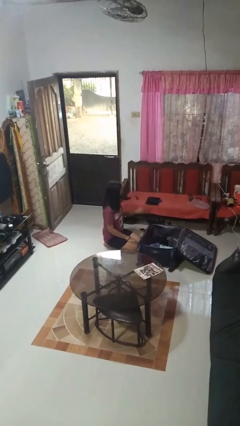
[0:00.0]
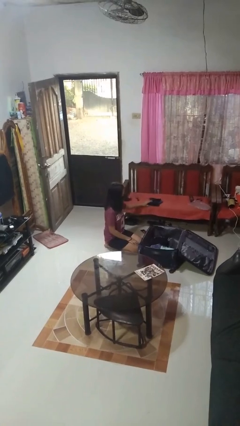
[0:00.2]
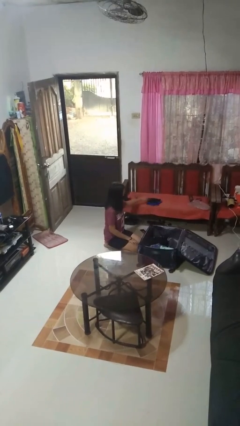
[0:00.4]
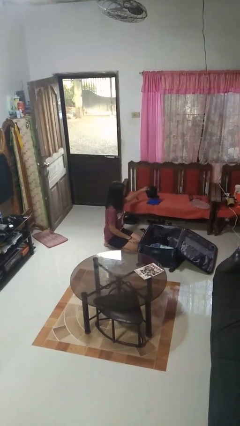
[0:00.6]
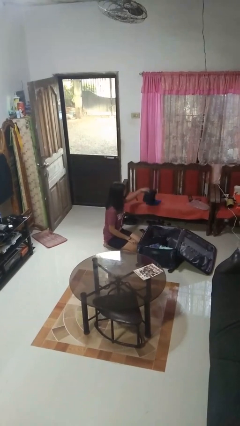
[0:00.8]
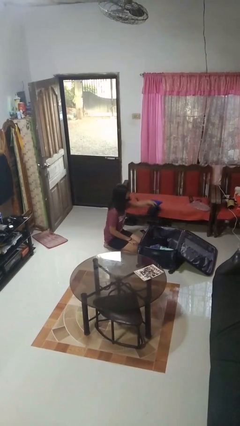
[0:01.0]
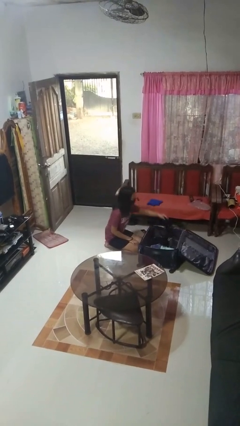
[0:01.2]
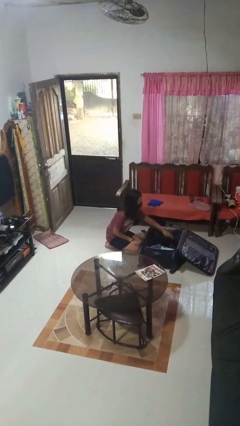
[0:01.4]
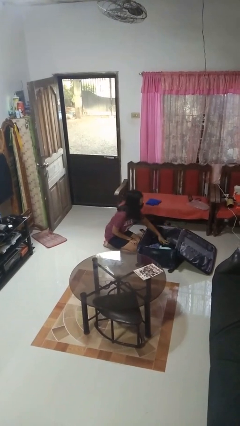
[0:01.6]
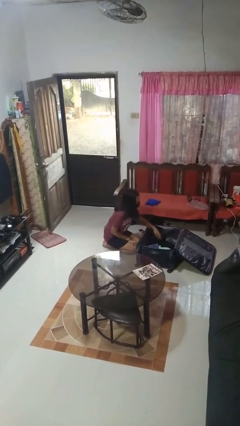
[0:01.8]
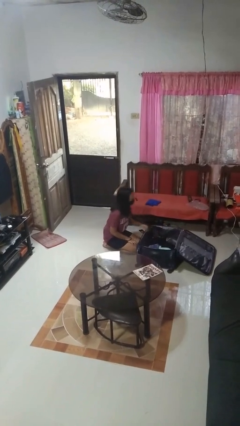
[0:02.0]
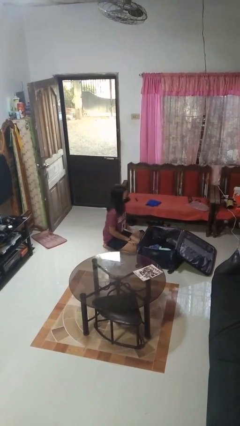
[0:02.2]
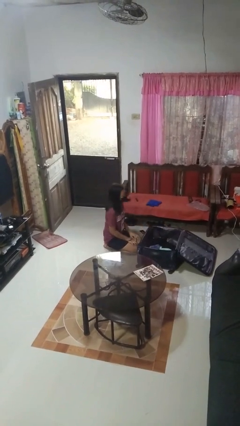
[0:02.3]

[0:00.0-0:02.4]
person loads clothes into suitcase

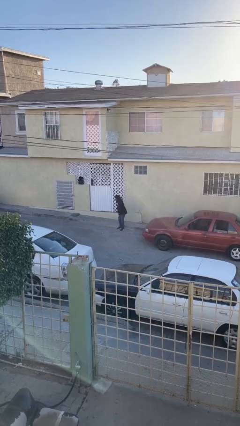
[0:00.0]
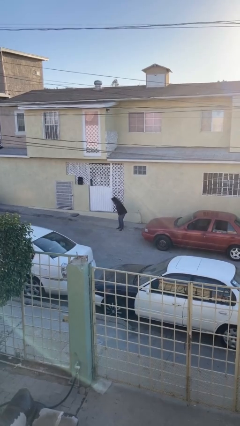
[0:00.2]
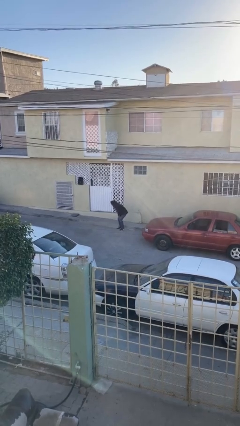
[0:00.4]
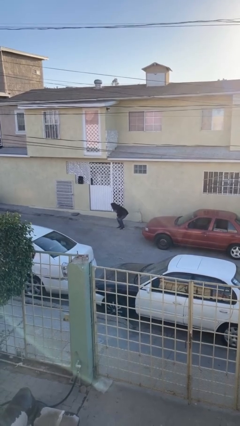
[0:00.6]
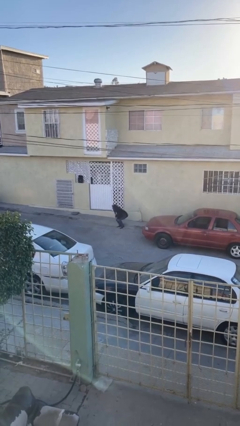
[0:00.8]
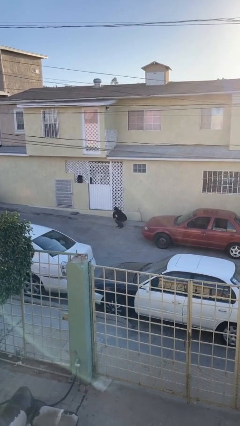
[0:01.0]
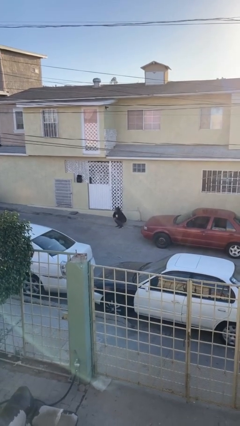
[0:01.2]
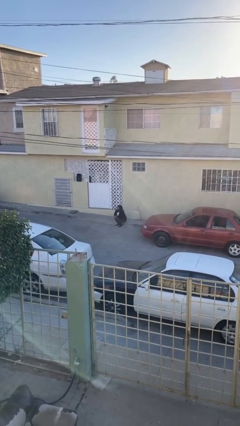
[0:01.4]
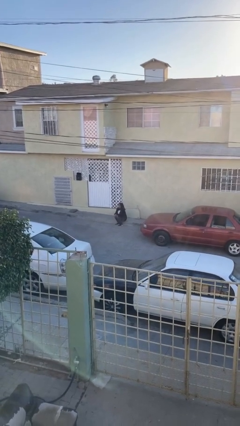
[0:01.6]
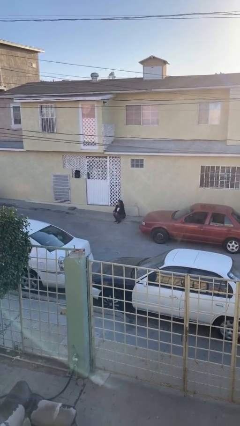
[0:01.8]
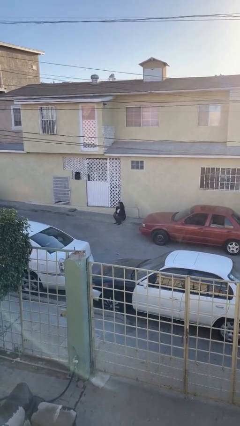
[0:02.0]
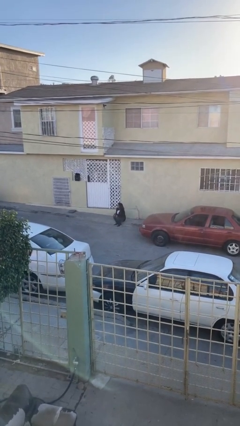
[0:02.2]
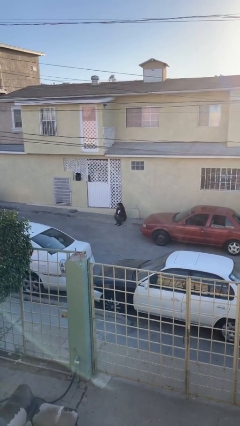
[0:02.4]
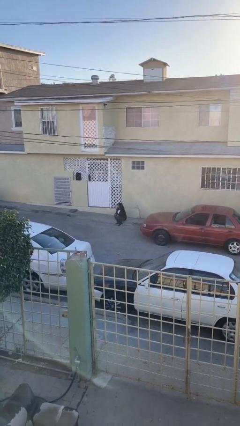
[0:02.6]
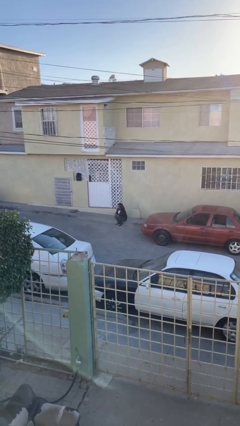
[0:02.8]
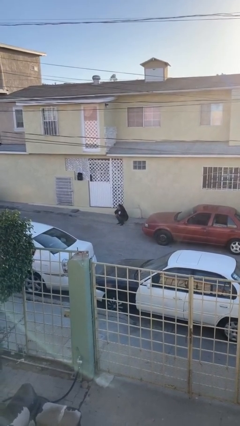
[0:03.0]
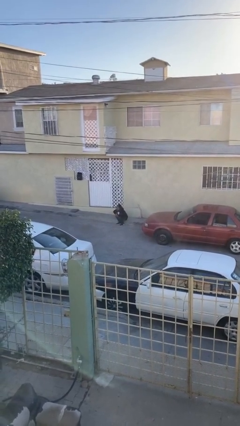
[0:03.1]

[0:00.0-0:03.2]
person stands up

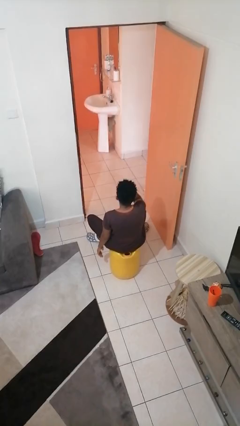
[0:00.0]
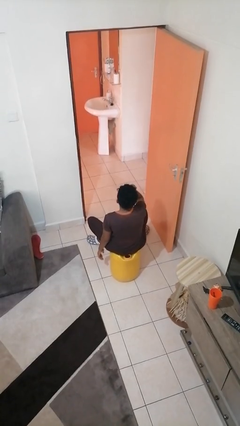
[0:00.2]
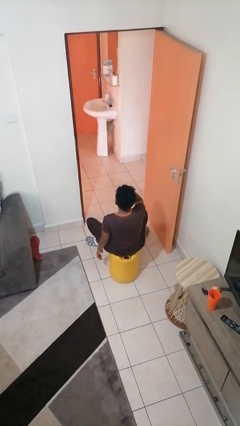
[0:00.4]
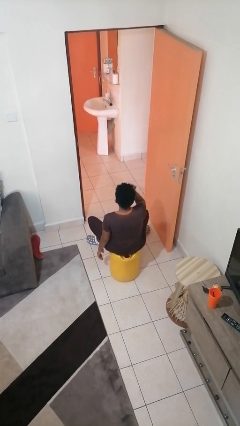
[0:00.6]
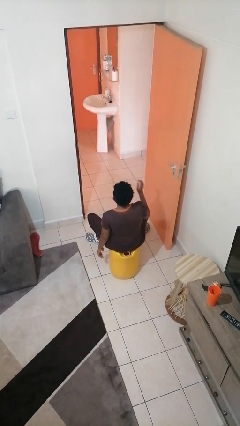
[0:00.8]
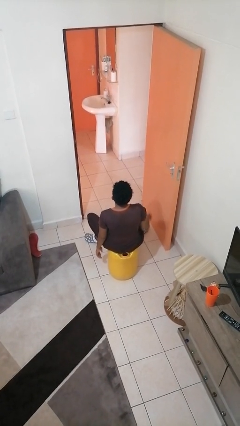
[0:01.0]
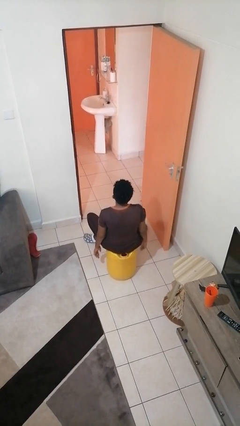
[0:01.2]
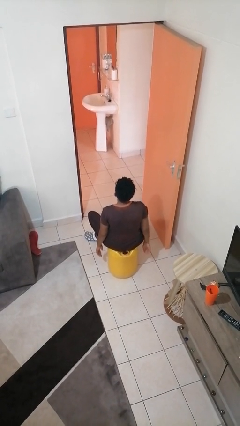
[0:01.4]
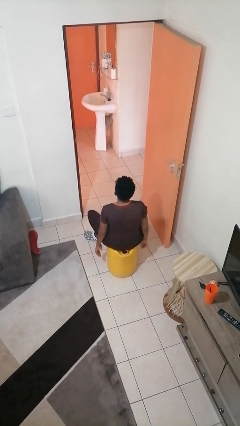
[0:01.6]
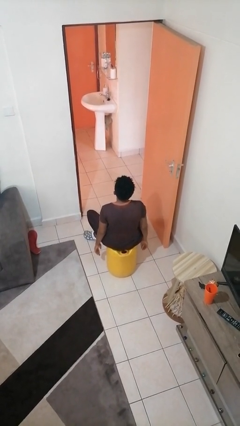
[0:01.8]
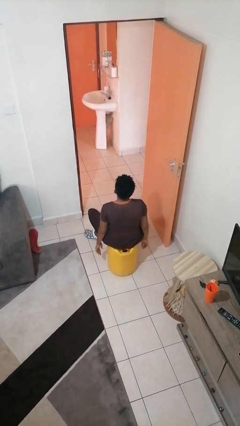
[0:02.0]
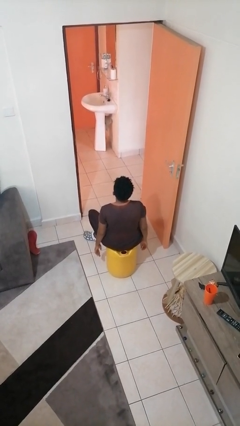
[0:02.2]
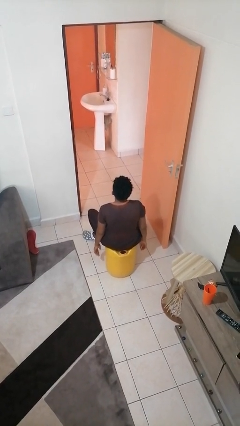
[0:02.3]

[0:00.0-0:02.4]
person puts on glasses

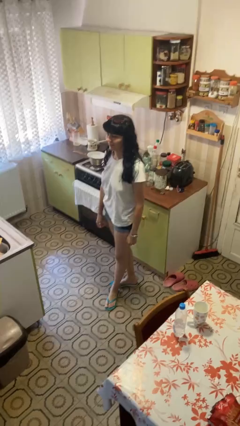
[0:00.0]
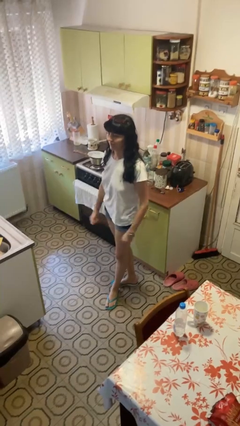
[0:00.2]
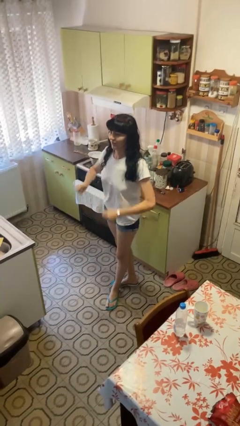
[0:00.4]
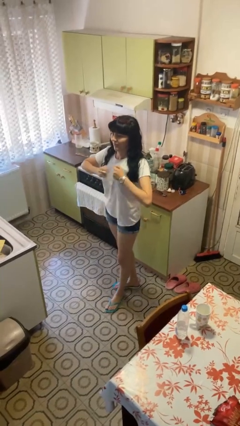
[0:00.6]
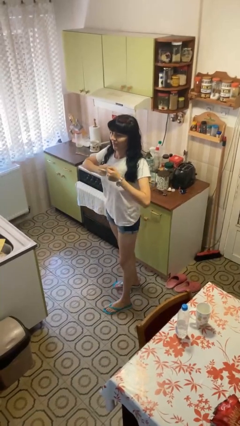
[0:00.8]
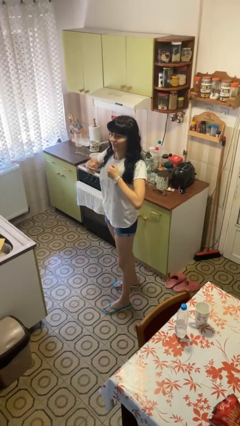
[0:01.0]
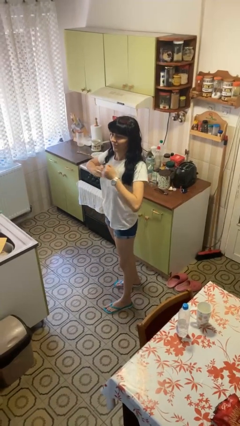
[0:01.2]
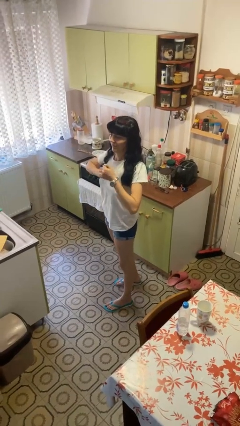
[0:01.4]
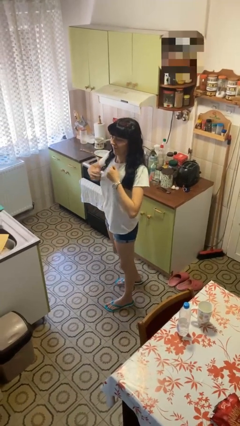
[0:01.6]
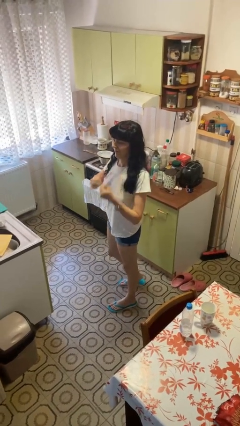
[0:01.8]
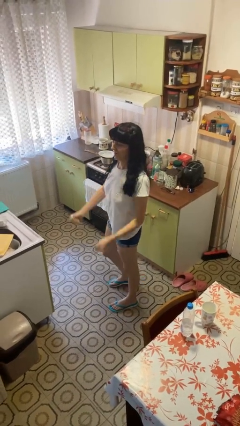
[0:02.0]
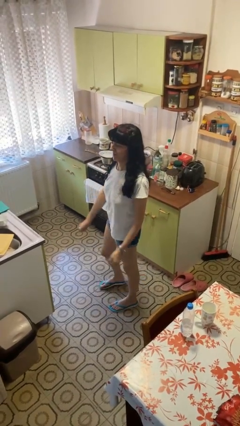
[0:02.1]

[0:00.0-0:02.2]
person drums on chest

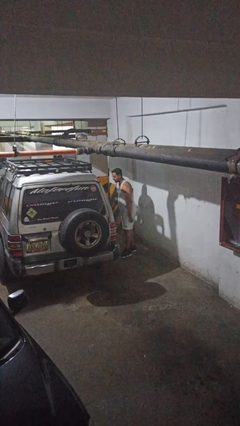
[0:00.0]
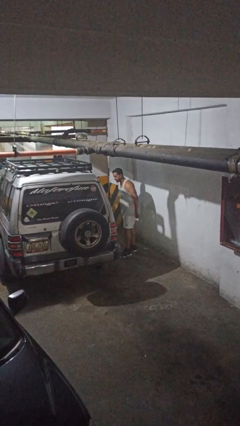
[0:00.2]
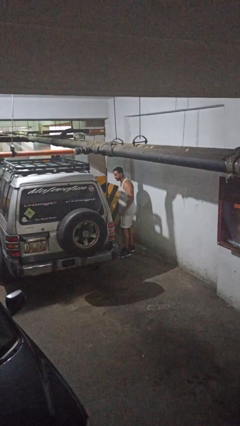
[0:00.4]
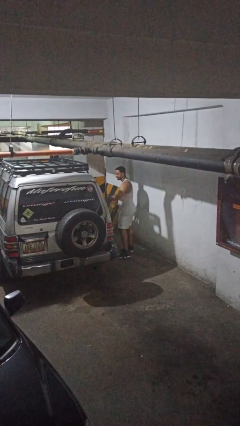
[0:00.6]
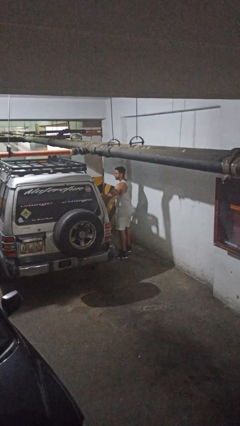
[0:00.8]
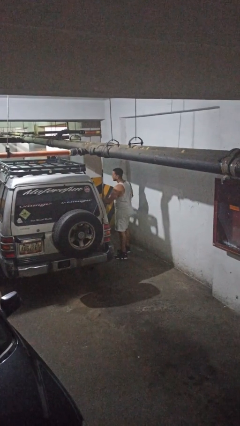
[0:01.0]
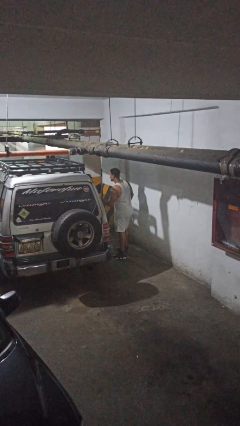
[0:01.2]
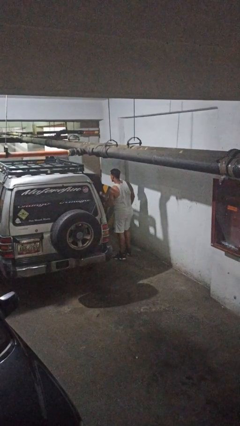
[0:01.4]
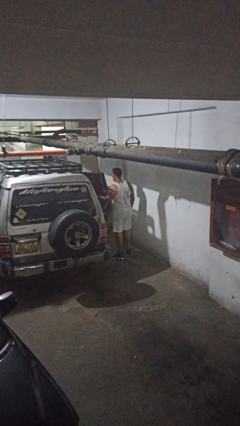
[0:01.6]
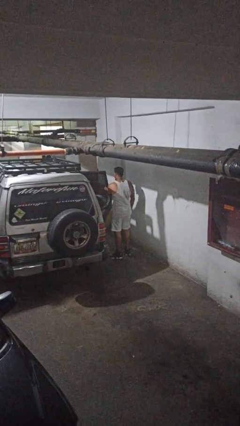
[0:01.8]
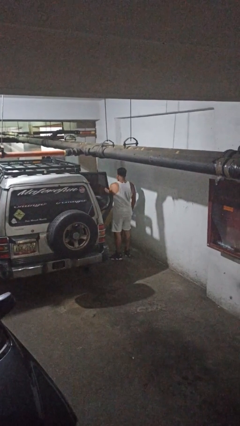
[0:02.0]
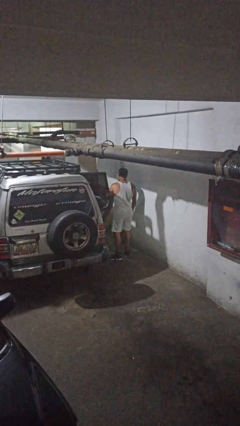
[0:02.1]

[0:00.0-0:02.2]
person opens car door

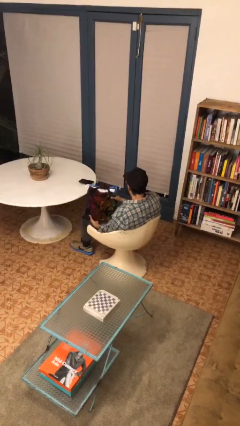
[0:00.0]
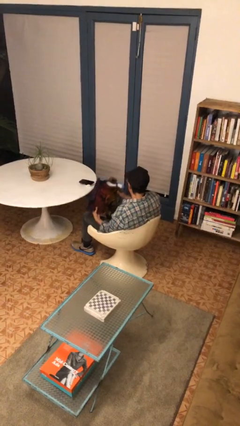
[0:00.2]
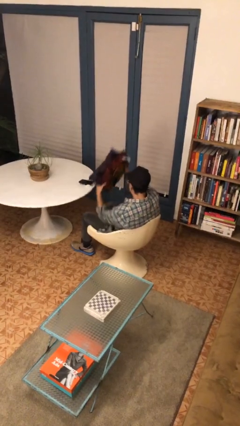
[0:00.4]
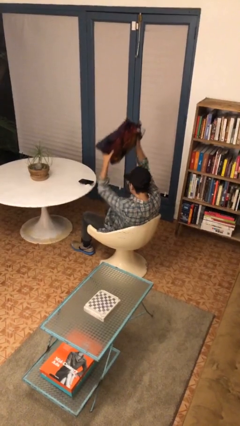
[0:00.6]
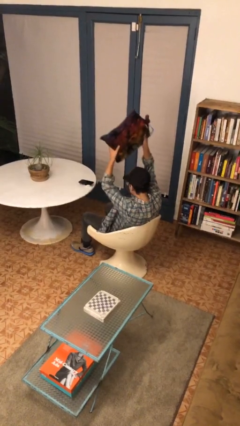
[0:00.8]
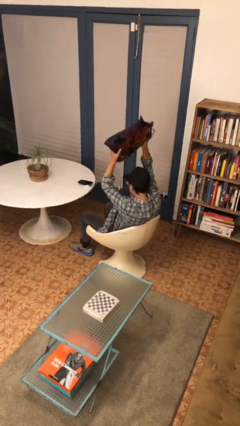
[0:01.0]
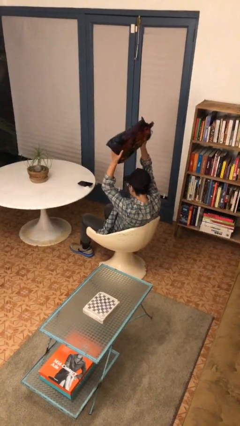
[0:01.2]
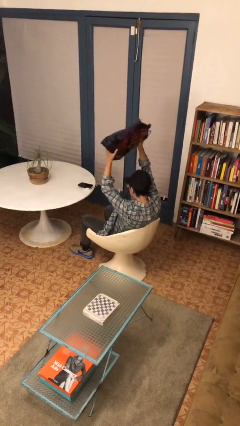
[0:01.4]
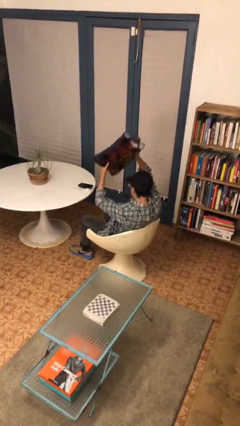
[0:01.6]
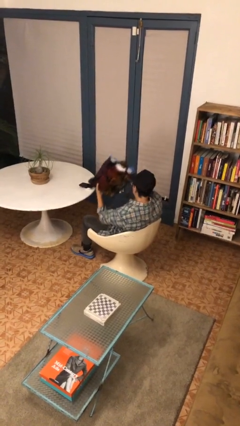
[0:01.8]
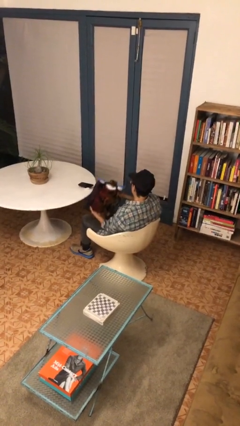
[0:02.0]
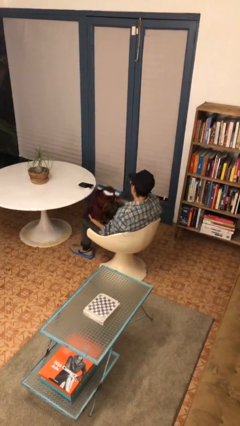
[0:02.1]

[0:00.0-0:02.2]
person holds object above head

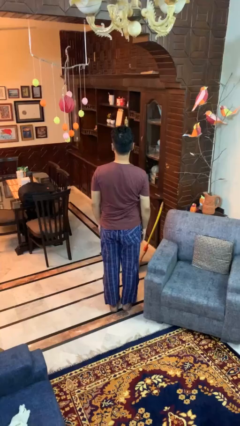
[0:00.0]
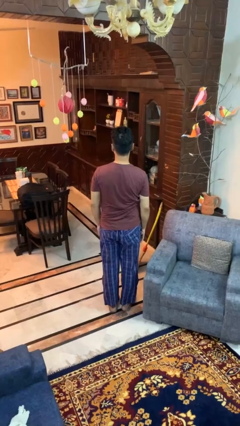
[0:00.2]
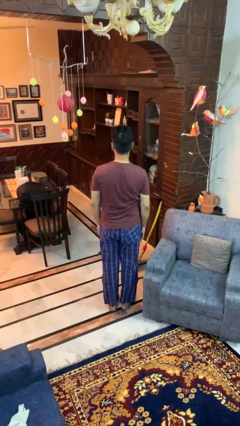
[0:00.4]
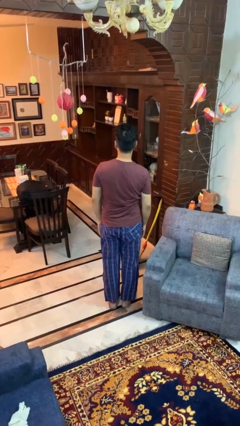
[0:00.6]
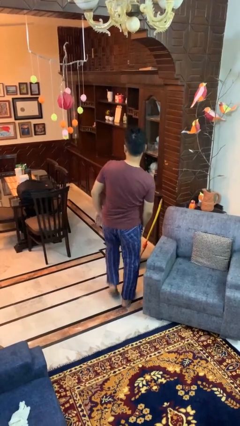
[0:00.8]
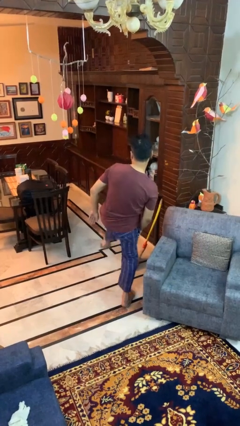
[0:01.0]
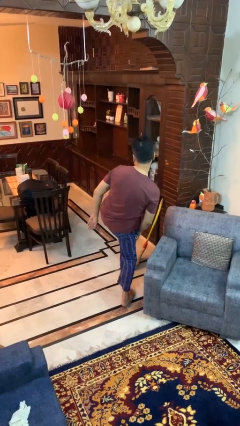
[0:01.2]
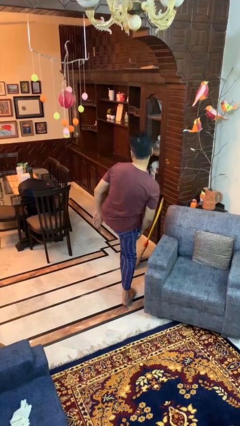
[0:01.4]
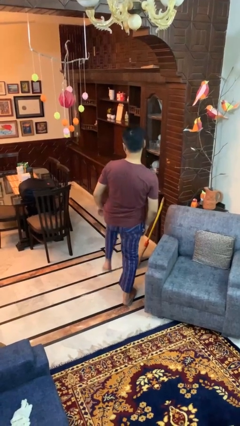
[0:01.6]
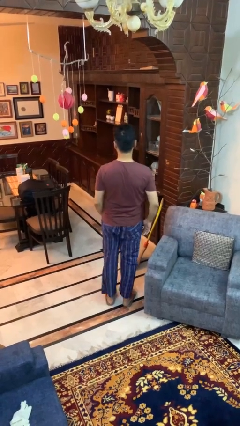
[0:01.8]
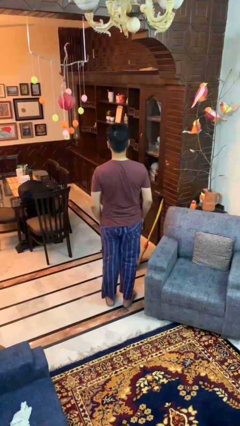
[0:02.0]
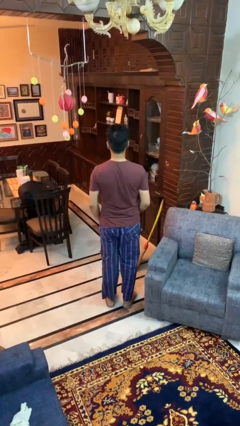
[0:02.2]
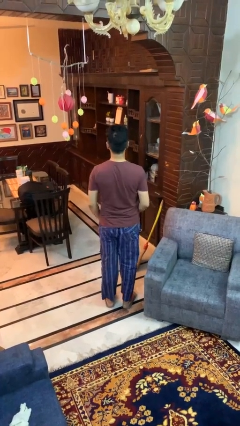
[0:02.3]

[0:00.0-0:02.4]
person karate kicks

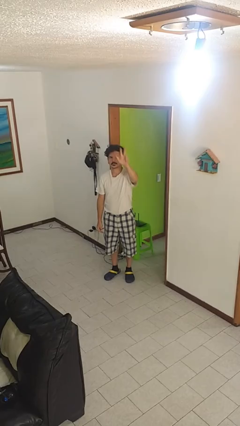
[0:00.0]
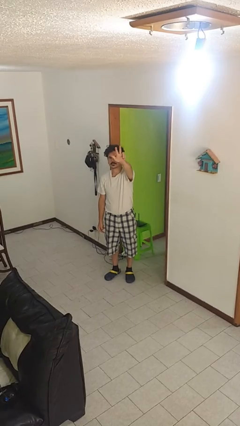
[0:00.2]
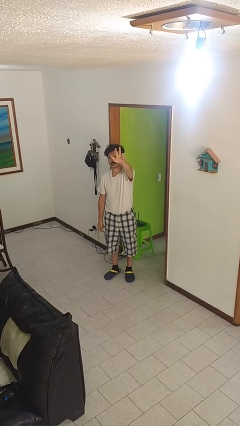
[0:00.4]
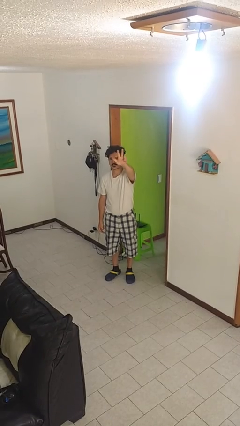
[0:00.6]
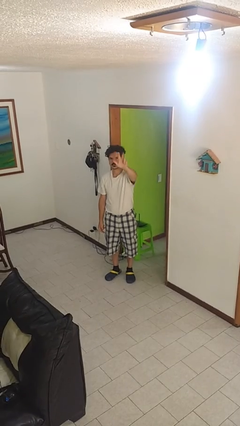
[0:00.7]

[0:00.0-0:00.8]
person gestures number three
